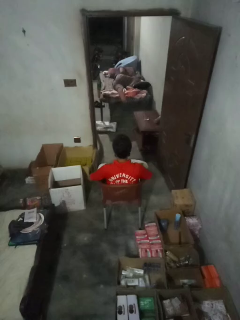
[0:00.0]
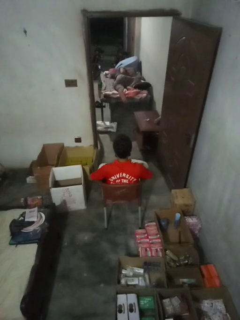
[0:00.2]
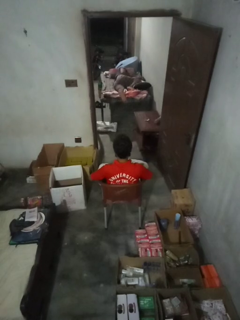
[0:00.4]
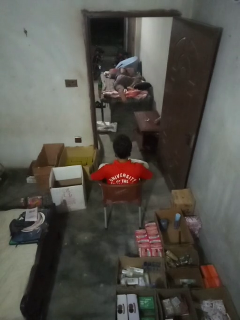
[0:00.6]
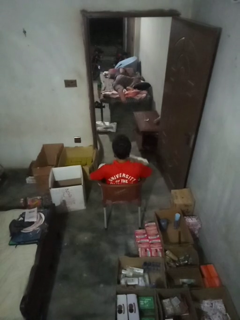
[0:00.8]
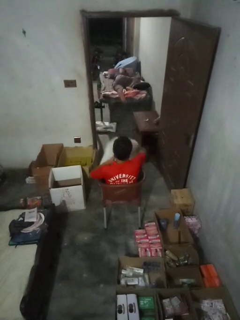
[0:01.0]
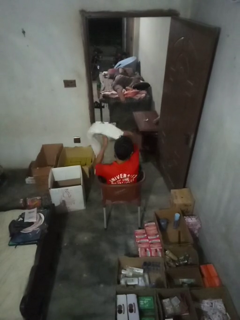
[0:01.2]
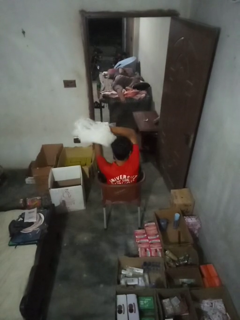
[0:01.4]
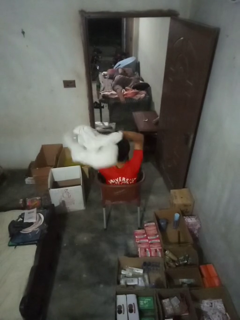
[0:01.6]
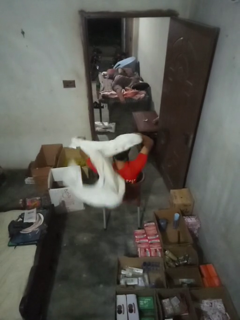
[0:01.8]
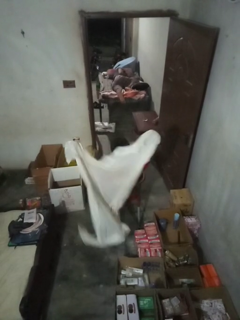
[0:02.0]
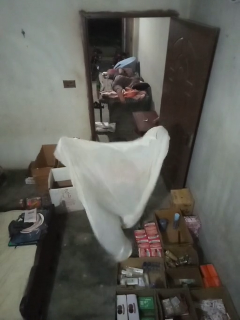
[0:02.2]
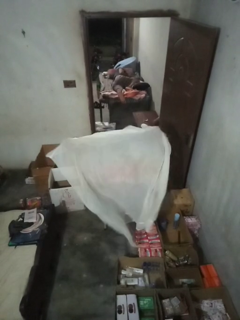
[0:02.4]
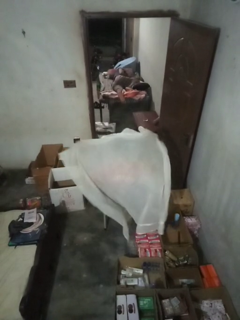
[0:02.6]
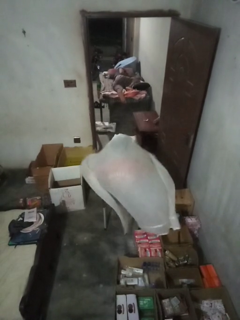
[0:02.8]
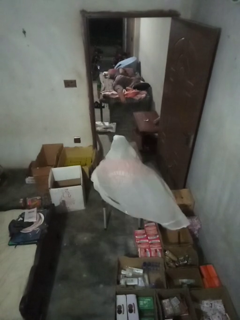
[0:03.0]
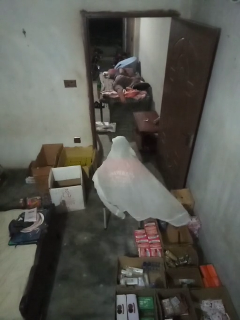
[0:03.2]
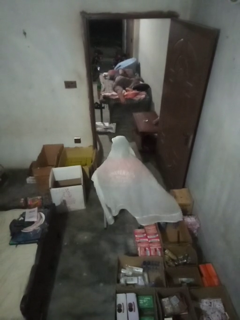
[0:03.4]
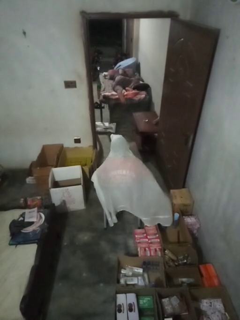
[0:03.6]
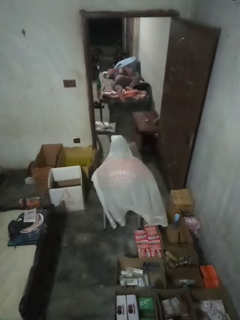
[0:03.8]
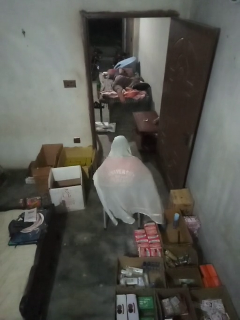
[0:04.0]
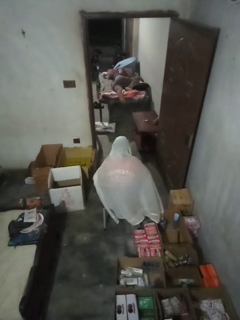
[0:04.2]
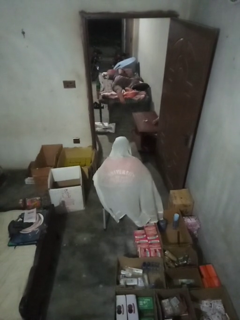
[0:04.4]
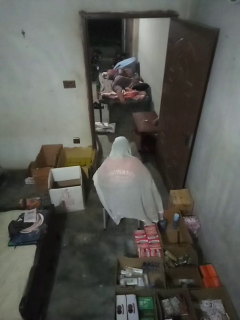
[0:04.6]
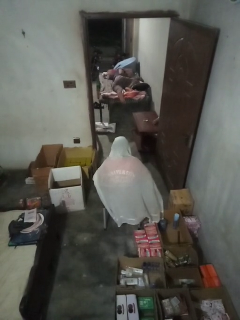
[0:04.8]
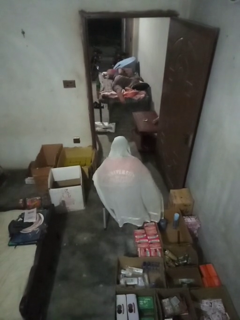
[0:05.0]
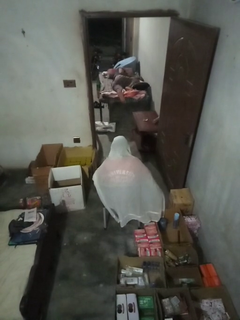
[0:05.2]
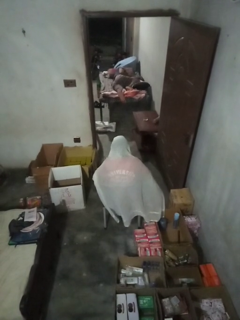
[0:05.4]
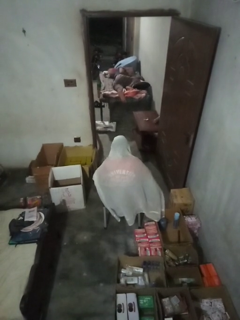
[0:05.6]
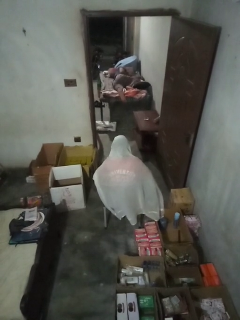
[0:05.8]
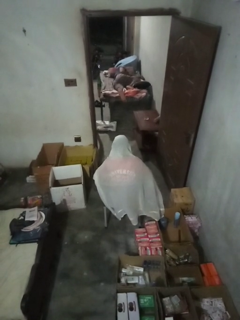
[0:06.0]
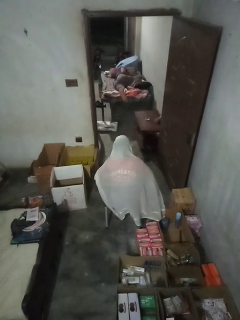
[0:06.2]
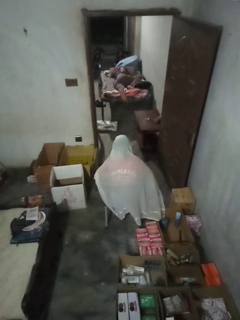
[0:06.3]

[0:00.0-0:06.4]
person covers with blanket

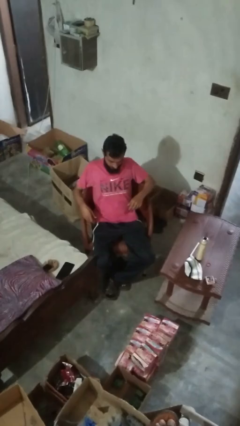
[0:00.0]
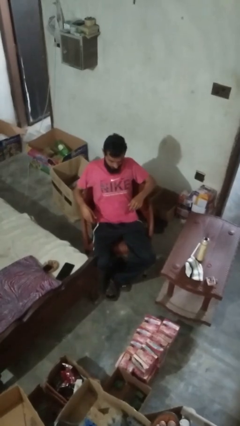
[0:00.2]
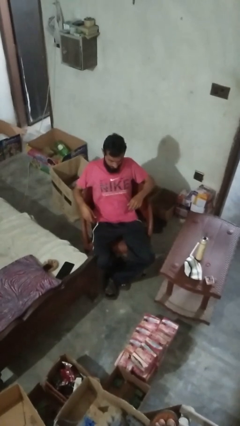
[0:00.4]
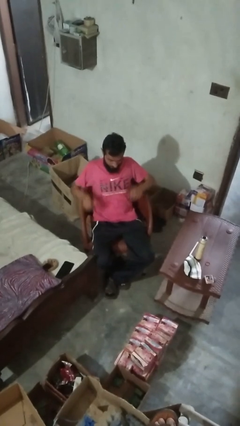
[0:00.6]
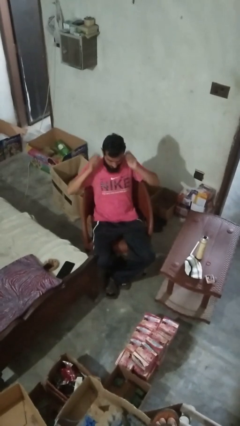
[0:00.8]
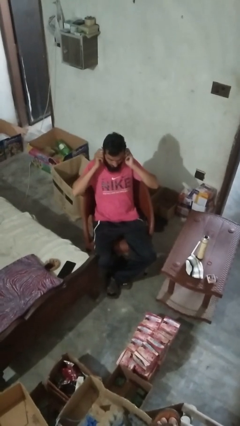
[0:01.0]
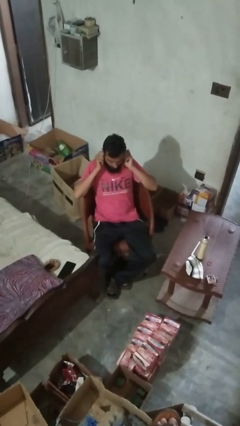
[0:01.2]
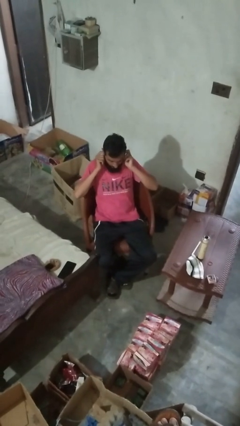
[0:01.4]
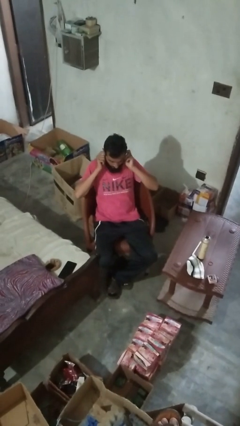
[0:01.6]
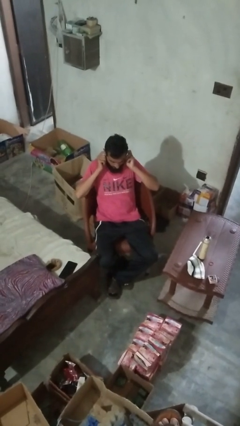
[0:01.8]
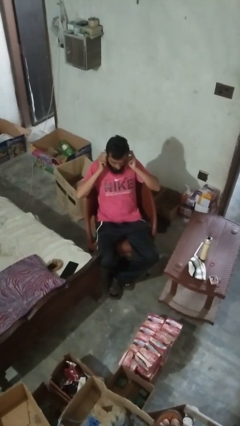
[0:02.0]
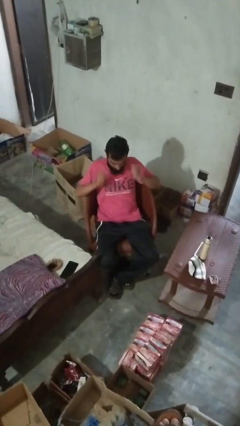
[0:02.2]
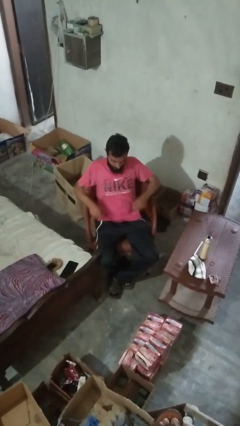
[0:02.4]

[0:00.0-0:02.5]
person puts fingers in ear

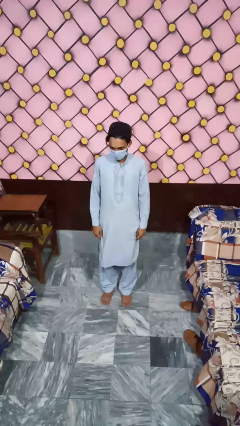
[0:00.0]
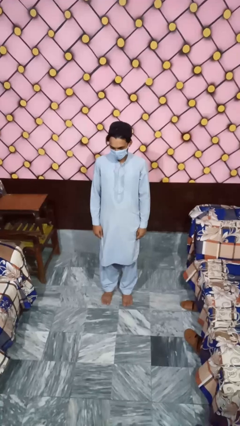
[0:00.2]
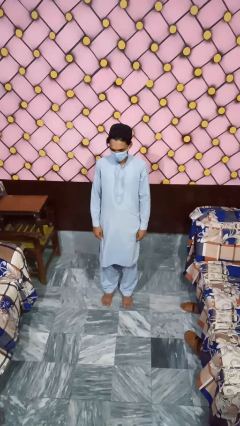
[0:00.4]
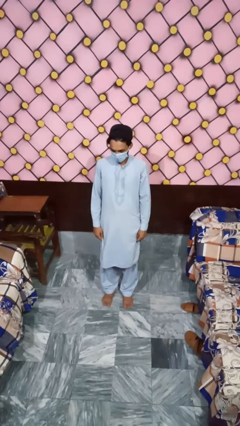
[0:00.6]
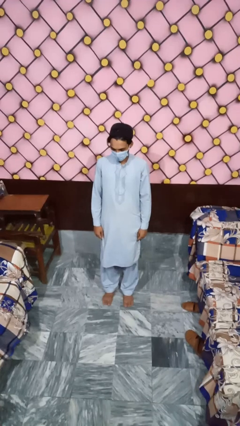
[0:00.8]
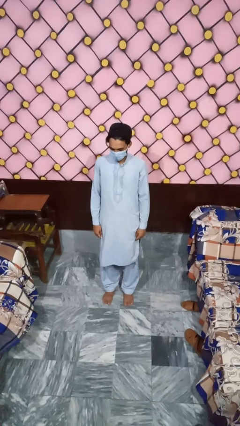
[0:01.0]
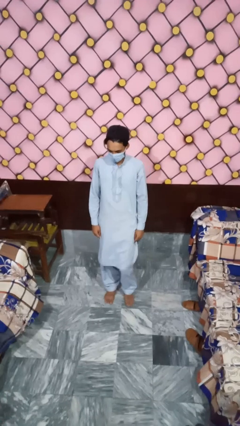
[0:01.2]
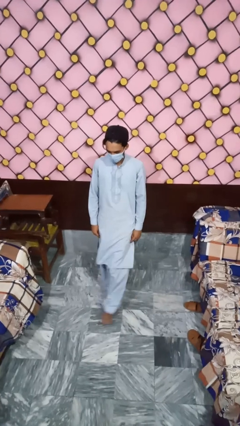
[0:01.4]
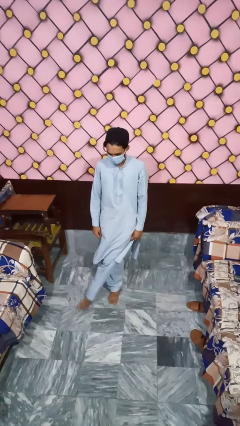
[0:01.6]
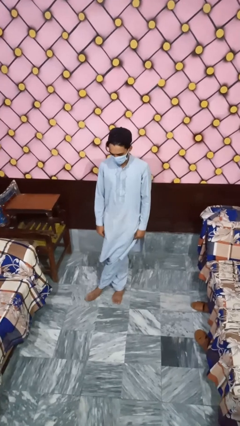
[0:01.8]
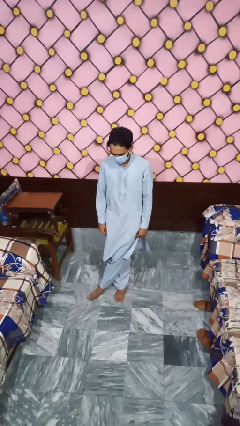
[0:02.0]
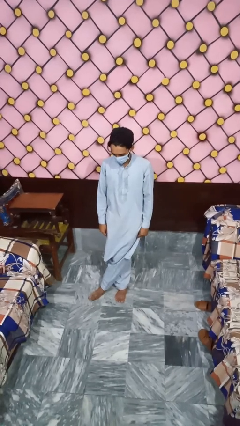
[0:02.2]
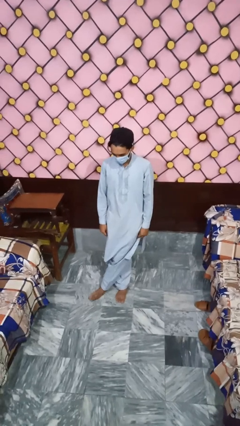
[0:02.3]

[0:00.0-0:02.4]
person crosses legs

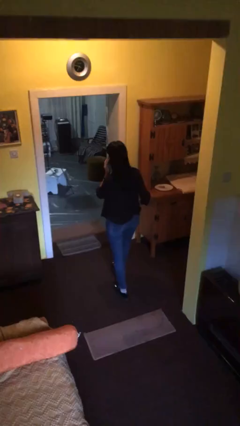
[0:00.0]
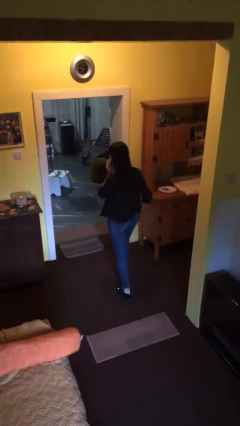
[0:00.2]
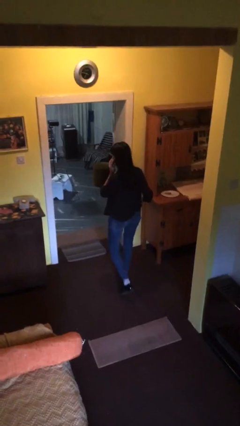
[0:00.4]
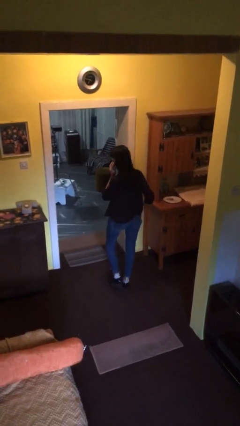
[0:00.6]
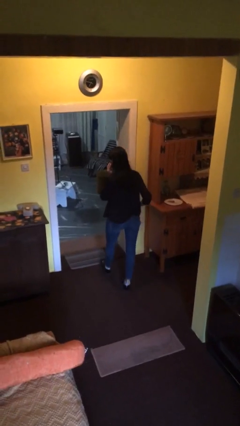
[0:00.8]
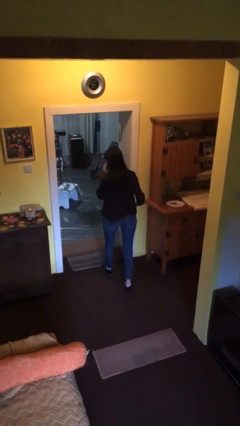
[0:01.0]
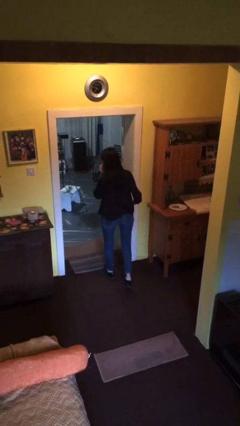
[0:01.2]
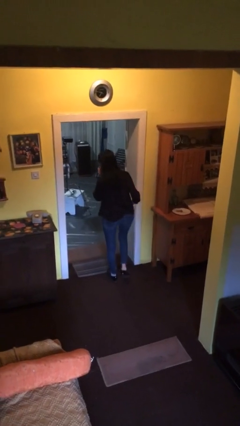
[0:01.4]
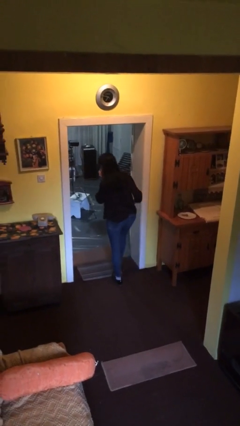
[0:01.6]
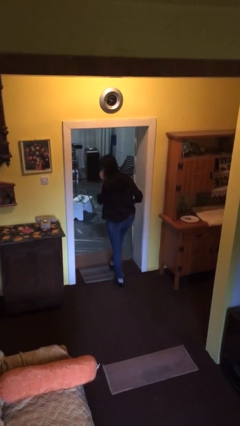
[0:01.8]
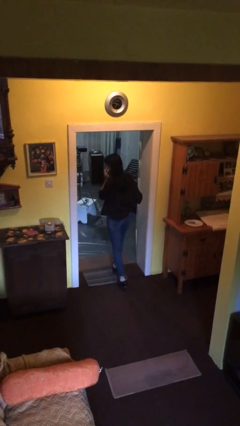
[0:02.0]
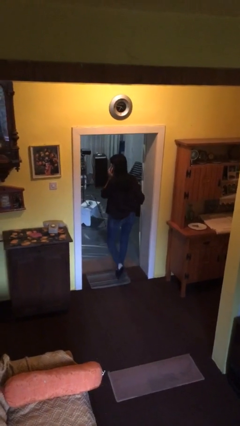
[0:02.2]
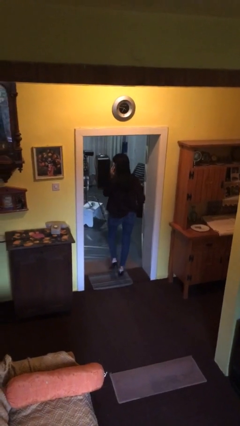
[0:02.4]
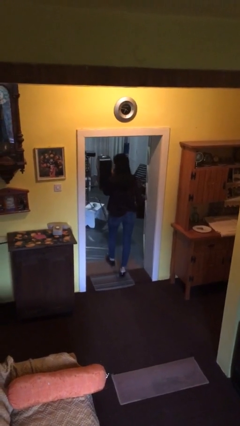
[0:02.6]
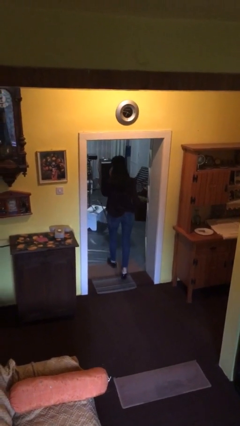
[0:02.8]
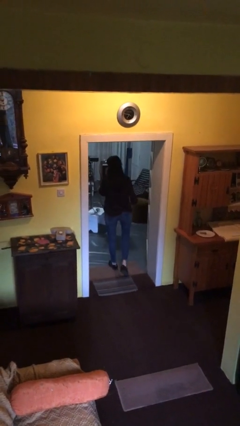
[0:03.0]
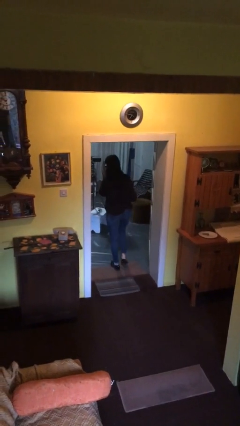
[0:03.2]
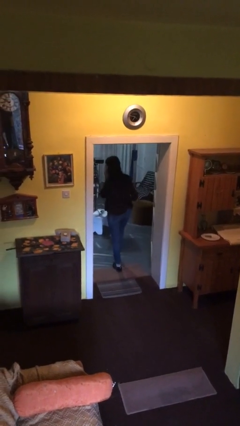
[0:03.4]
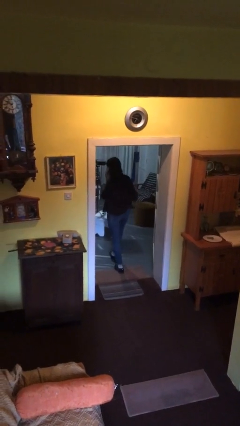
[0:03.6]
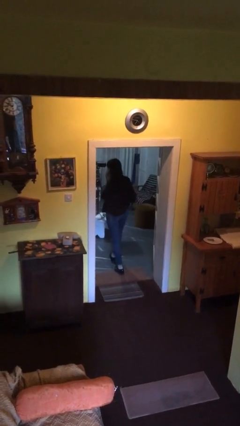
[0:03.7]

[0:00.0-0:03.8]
person exits scene through structure

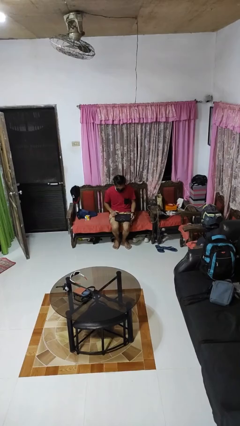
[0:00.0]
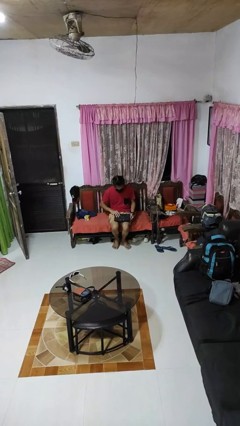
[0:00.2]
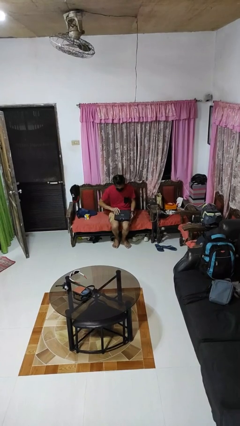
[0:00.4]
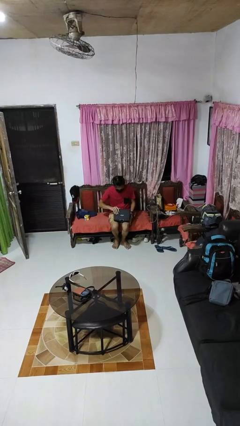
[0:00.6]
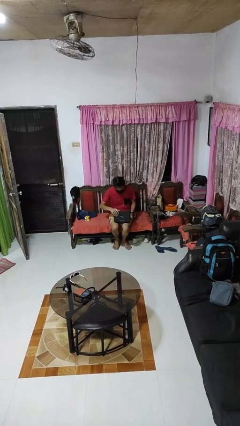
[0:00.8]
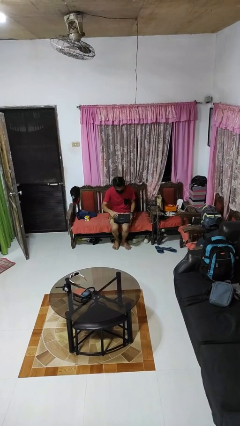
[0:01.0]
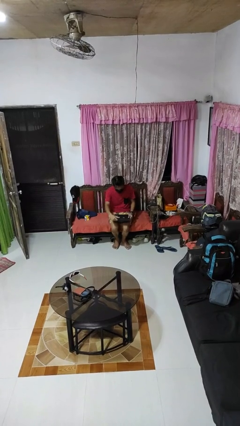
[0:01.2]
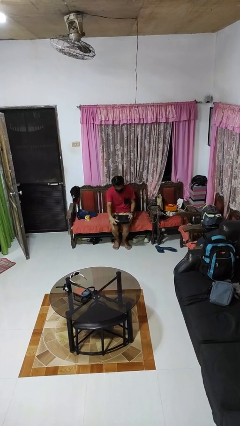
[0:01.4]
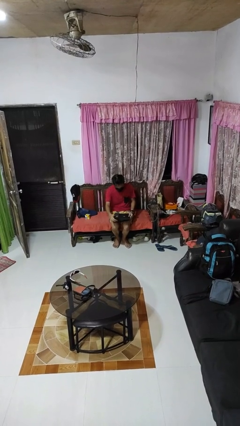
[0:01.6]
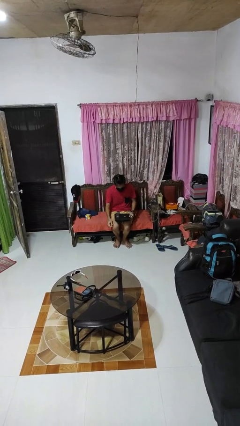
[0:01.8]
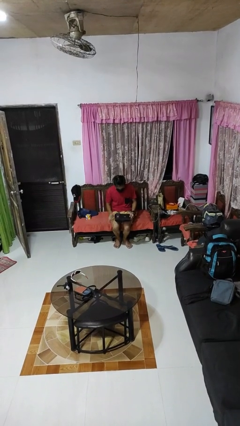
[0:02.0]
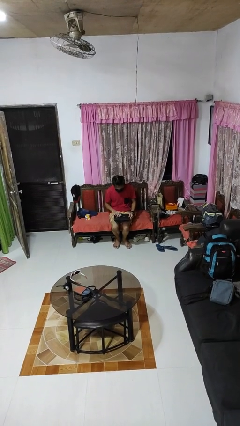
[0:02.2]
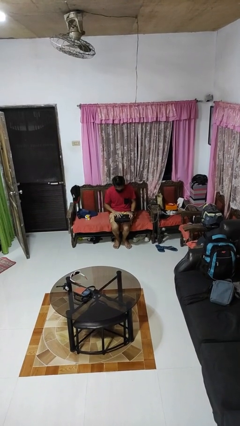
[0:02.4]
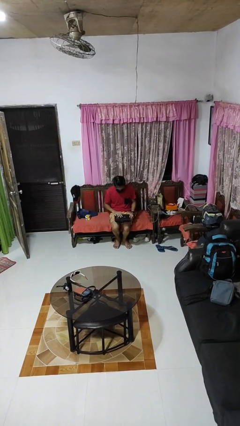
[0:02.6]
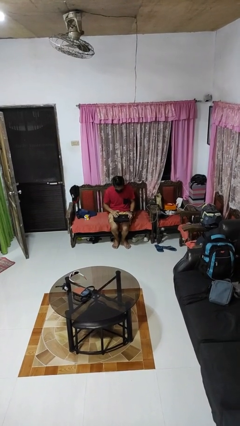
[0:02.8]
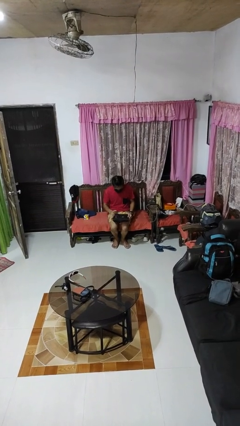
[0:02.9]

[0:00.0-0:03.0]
person opens laptop

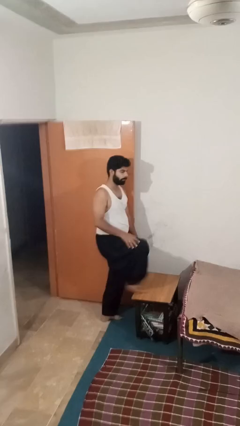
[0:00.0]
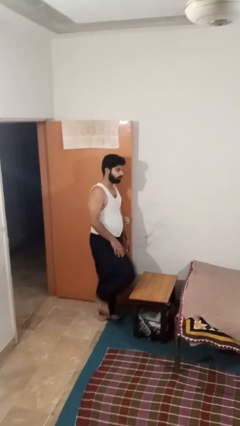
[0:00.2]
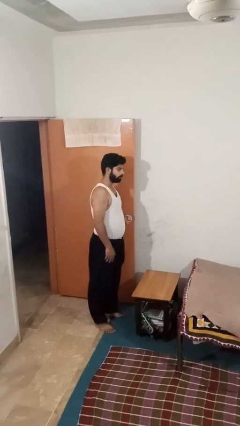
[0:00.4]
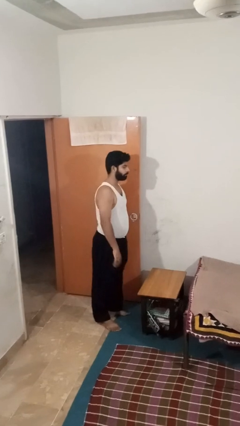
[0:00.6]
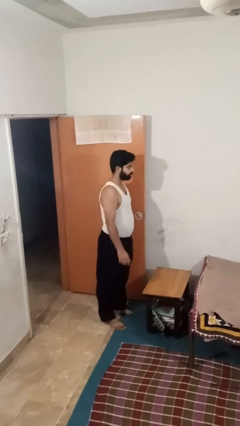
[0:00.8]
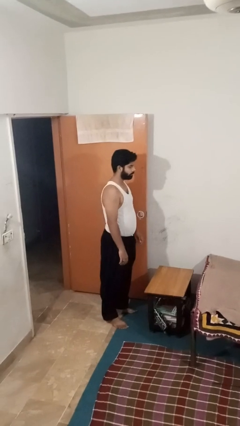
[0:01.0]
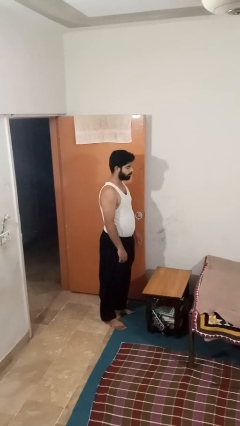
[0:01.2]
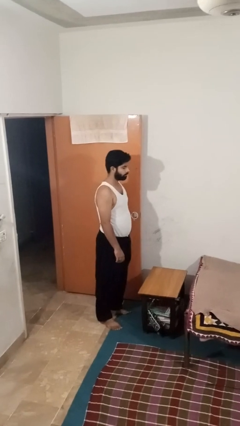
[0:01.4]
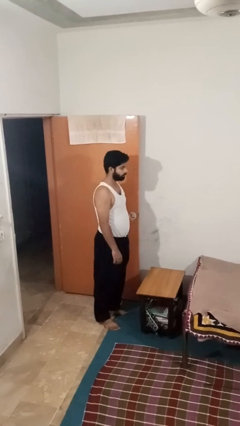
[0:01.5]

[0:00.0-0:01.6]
person climbs off table
